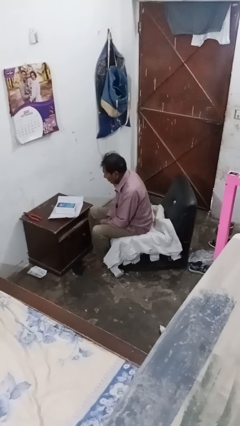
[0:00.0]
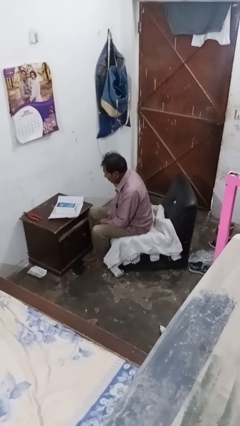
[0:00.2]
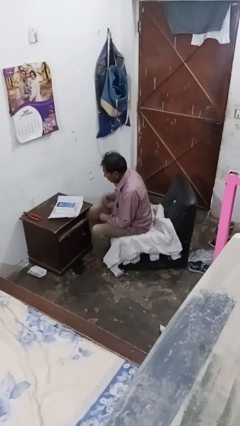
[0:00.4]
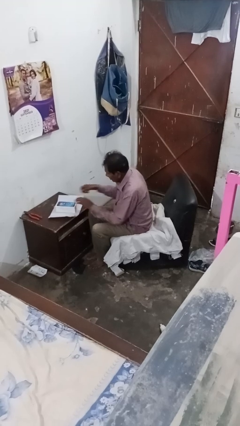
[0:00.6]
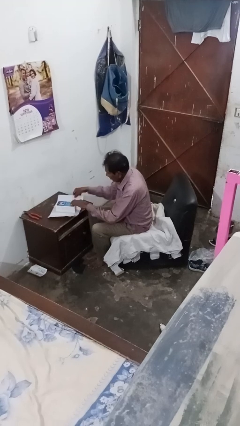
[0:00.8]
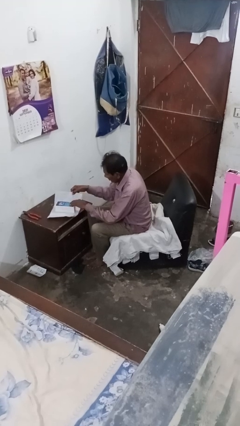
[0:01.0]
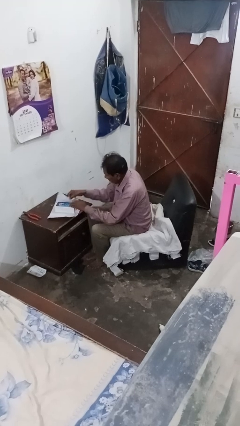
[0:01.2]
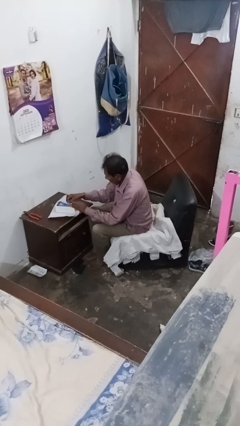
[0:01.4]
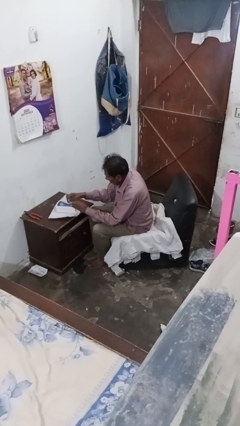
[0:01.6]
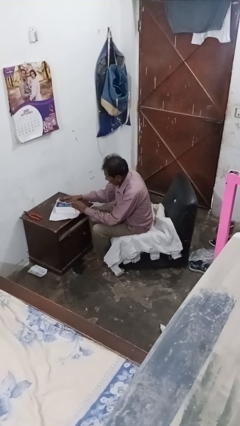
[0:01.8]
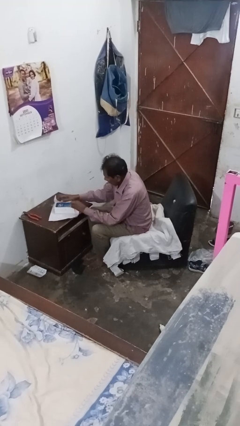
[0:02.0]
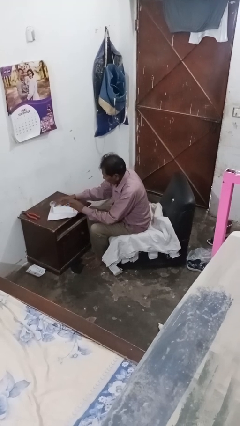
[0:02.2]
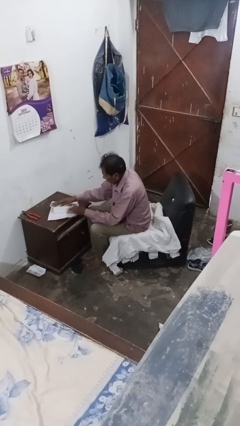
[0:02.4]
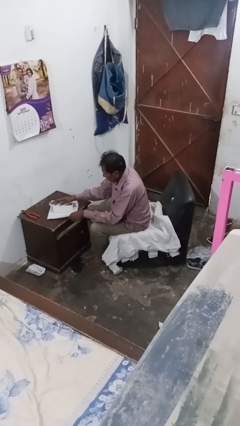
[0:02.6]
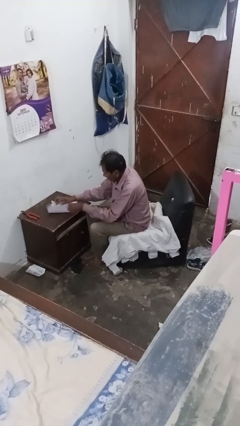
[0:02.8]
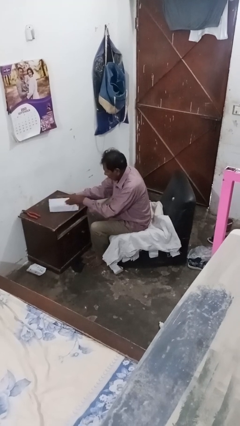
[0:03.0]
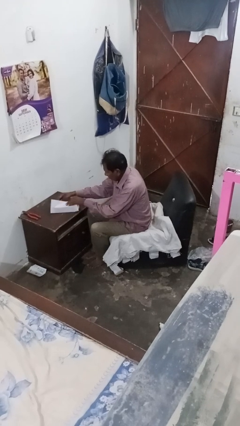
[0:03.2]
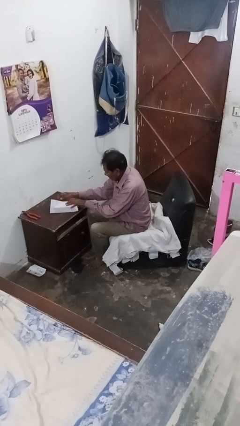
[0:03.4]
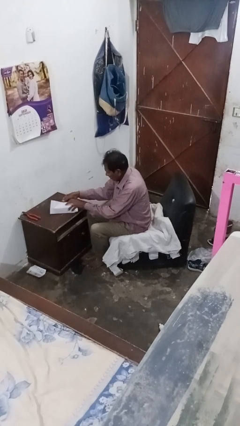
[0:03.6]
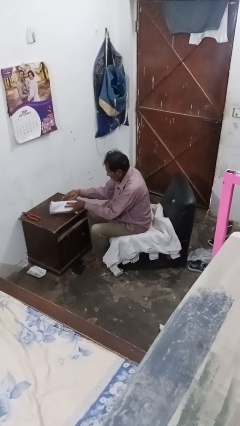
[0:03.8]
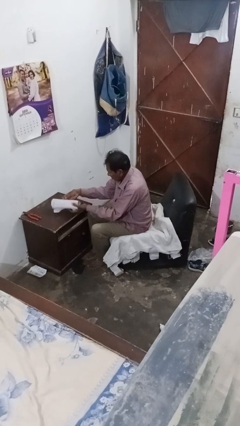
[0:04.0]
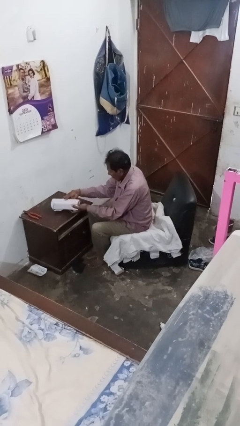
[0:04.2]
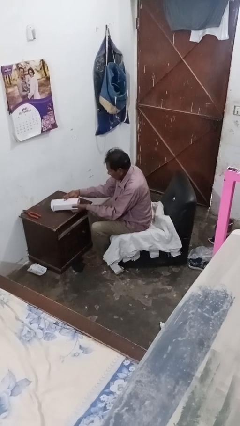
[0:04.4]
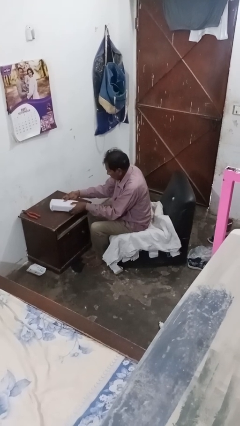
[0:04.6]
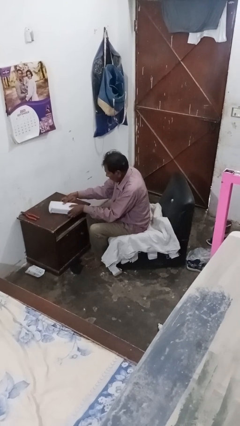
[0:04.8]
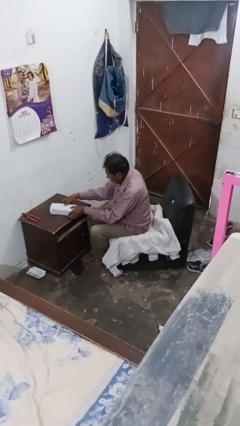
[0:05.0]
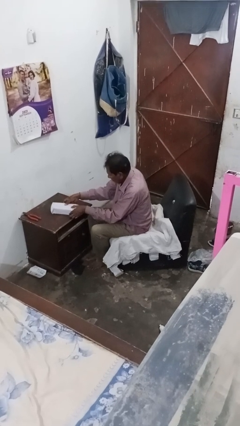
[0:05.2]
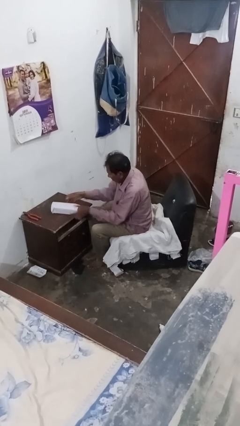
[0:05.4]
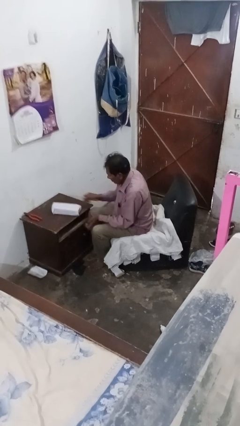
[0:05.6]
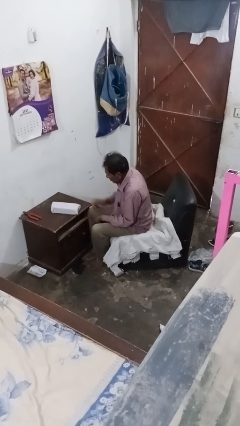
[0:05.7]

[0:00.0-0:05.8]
person wraps box

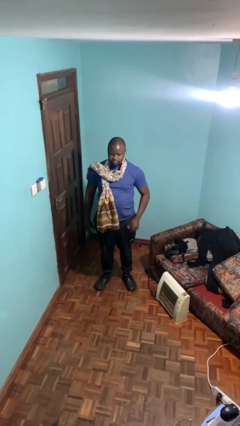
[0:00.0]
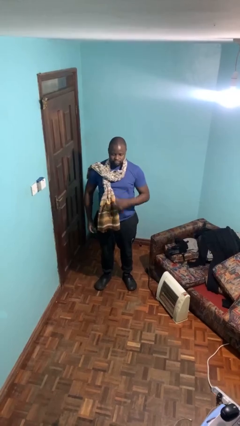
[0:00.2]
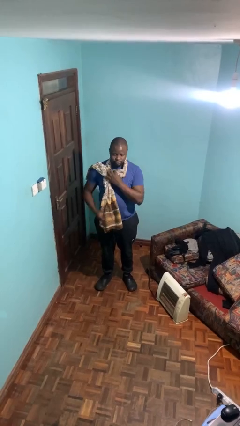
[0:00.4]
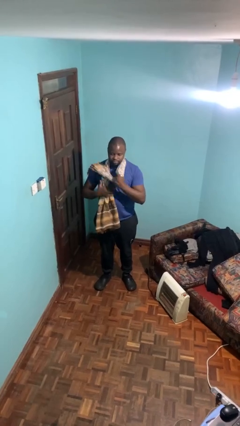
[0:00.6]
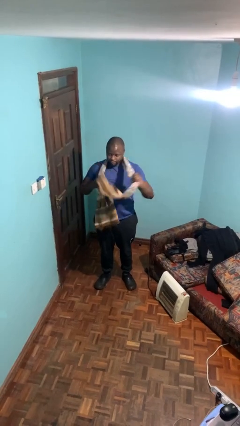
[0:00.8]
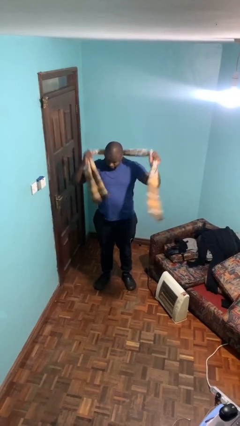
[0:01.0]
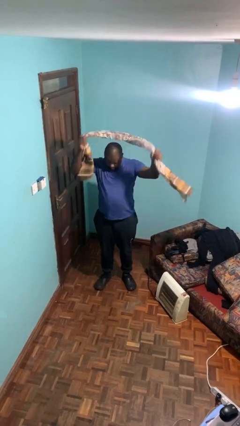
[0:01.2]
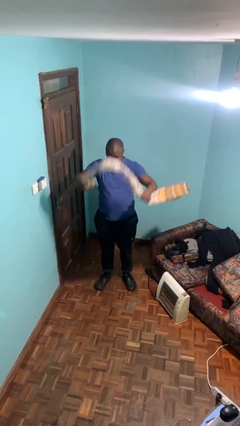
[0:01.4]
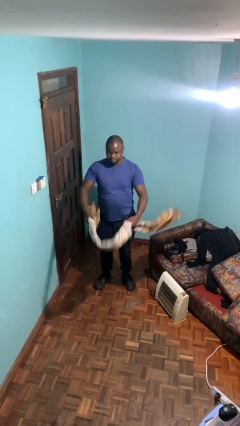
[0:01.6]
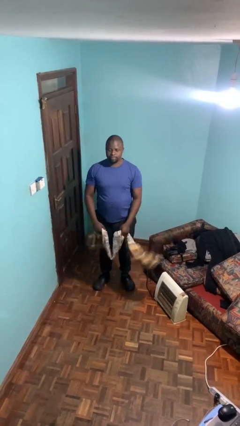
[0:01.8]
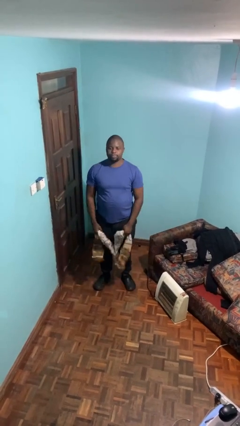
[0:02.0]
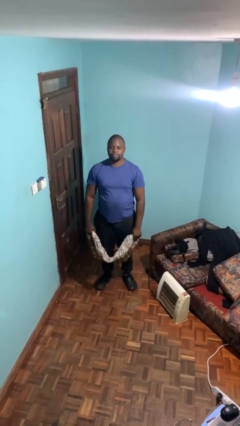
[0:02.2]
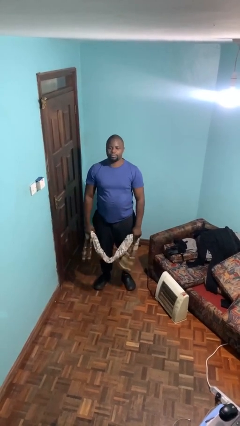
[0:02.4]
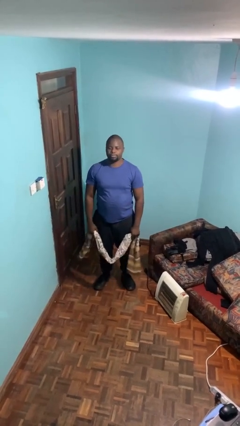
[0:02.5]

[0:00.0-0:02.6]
person takes off scarf

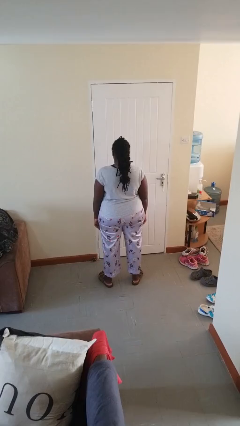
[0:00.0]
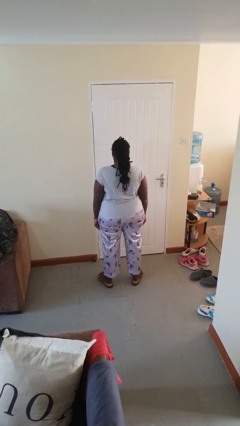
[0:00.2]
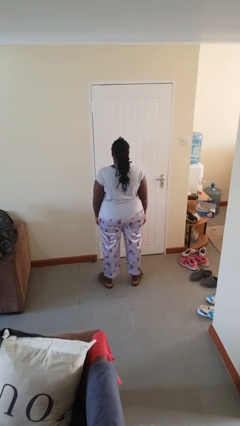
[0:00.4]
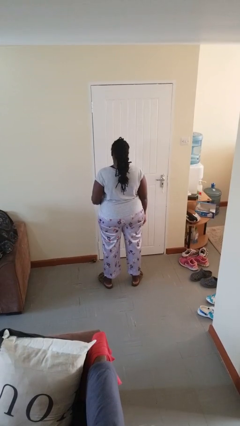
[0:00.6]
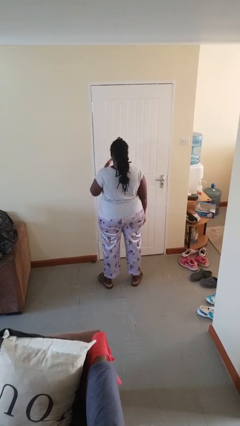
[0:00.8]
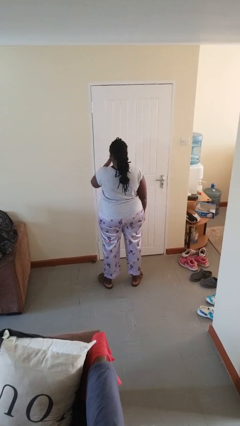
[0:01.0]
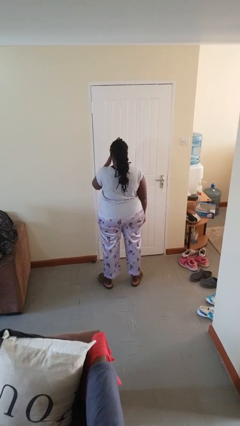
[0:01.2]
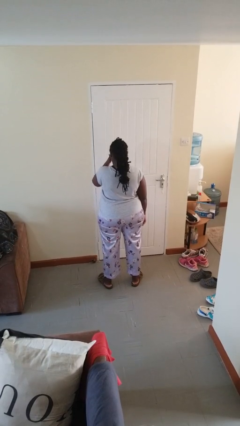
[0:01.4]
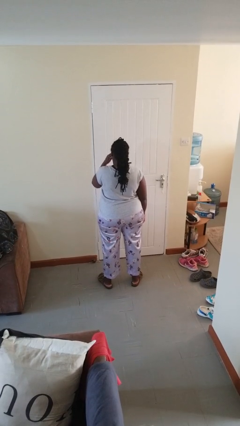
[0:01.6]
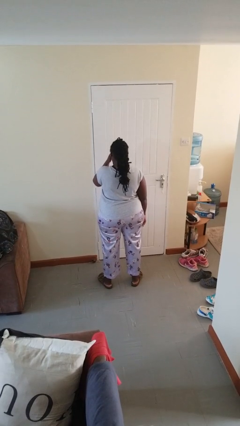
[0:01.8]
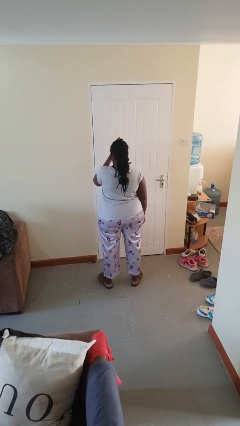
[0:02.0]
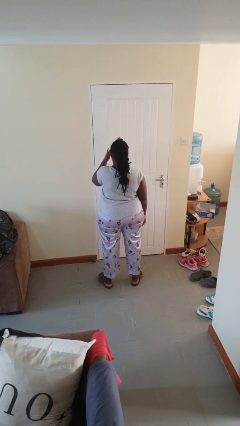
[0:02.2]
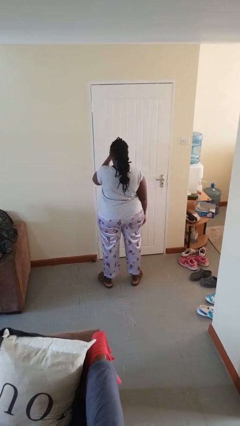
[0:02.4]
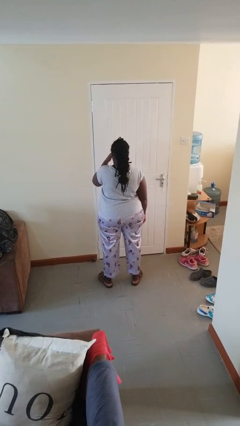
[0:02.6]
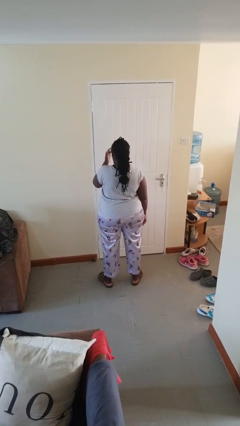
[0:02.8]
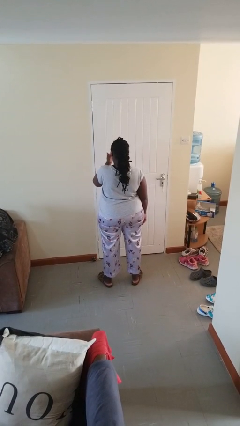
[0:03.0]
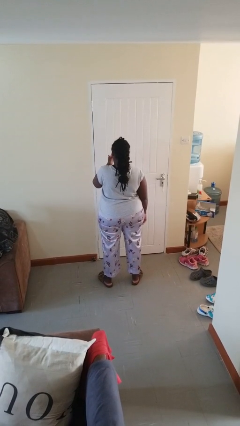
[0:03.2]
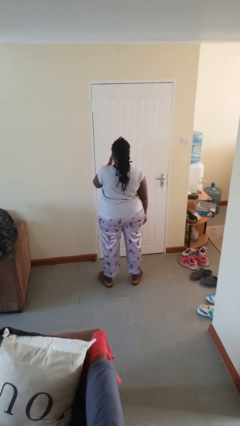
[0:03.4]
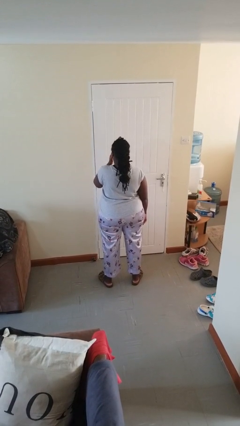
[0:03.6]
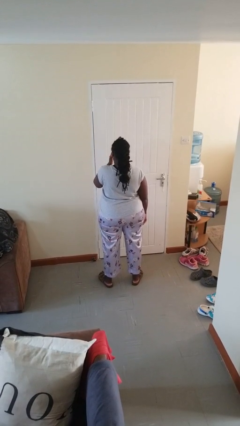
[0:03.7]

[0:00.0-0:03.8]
person scratches face

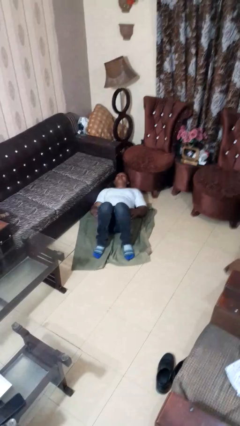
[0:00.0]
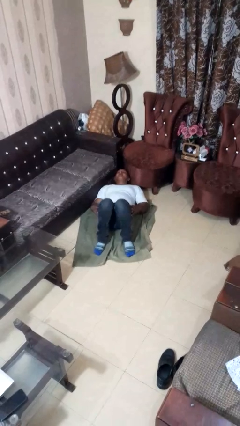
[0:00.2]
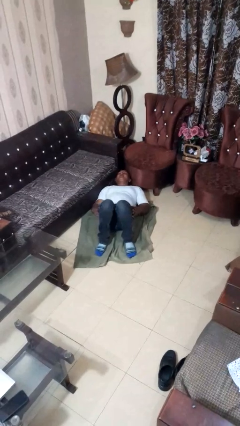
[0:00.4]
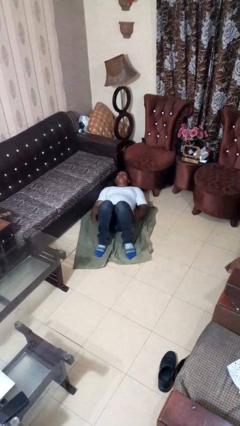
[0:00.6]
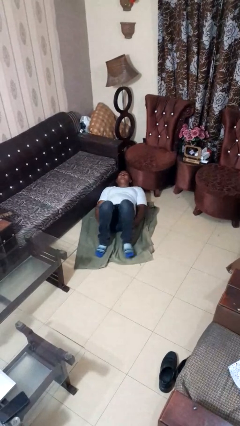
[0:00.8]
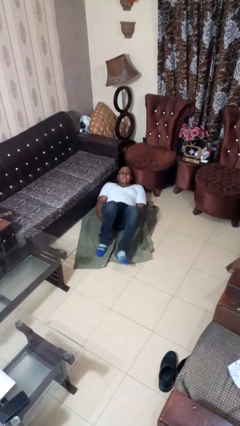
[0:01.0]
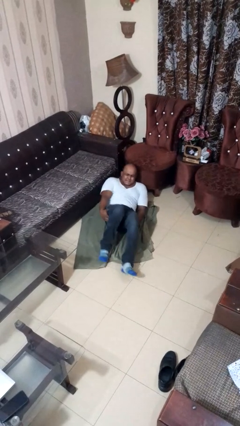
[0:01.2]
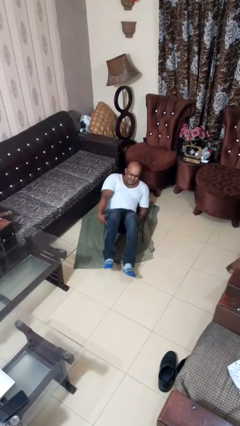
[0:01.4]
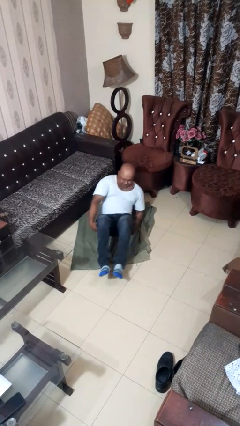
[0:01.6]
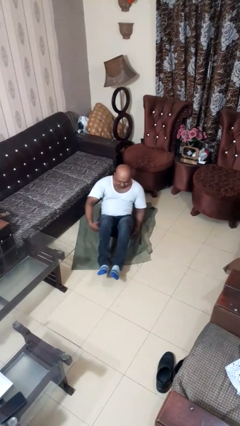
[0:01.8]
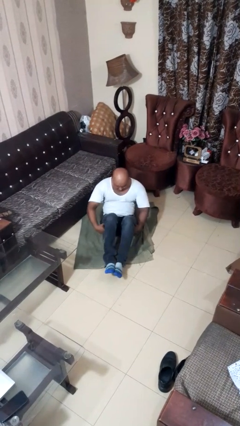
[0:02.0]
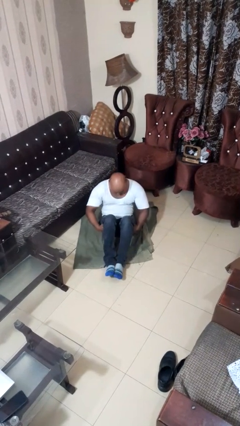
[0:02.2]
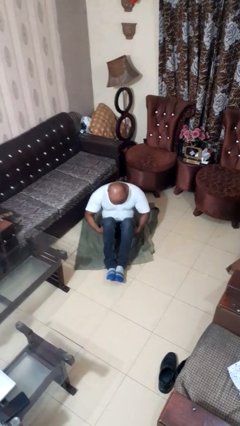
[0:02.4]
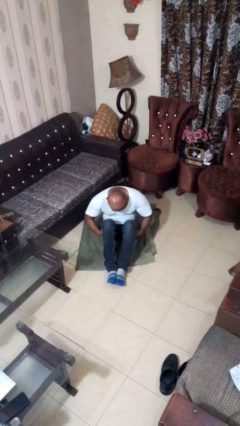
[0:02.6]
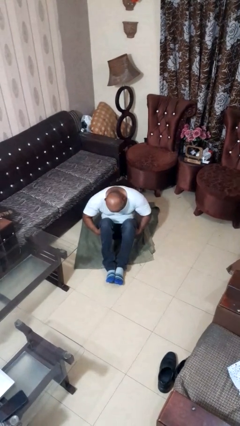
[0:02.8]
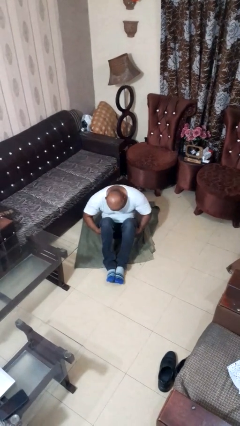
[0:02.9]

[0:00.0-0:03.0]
person exercises with situp

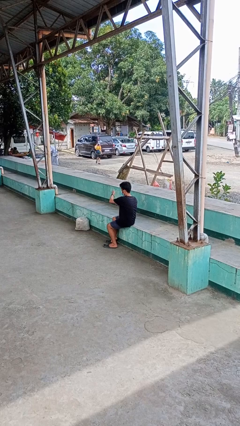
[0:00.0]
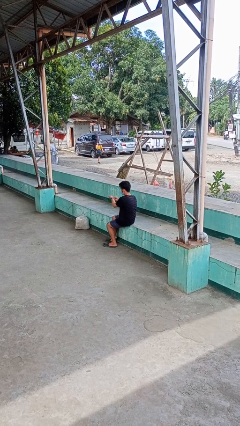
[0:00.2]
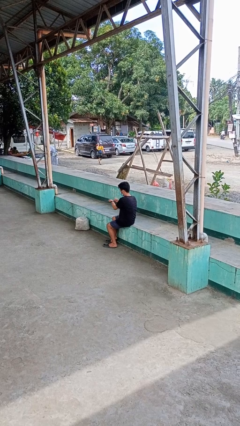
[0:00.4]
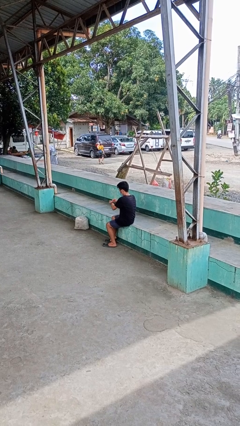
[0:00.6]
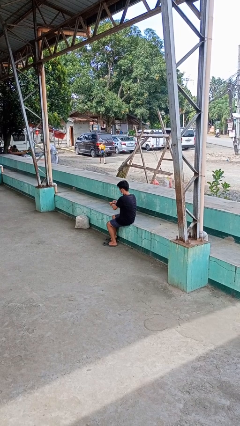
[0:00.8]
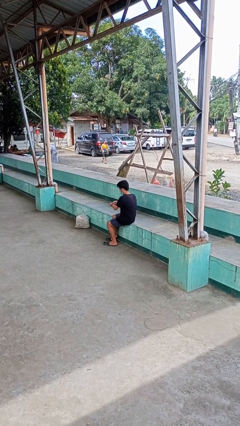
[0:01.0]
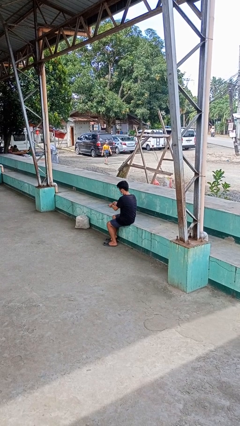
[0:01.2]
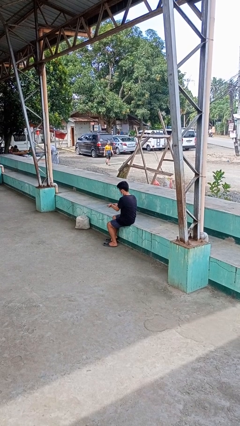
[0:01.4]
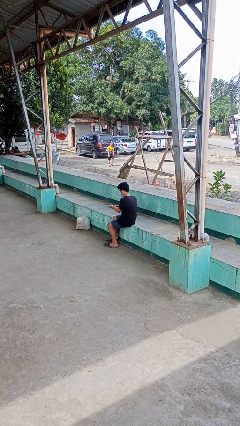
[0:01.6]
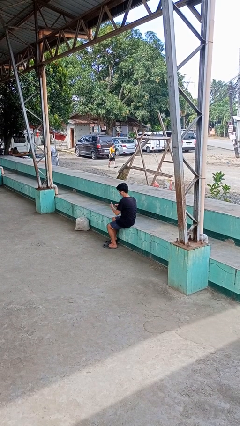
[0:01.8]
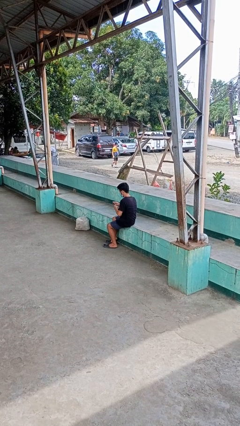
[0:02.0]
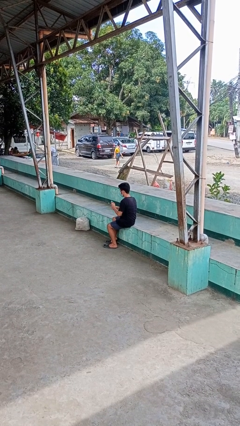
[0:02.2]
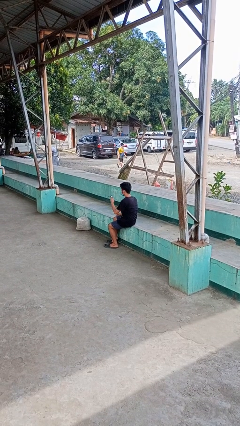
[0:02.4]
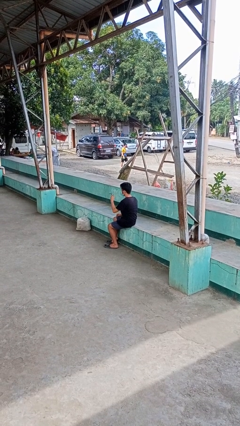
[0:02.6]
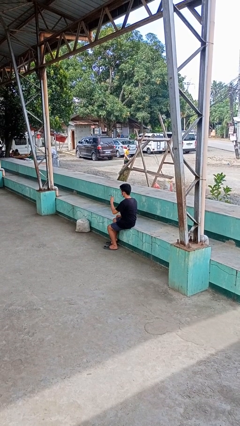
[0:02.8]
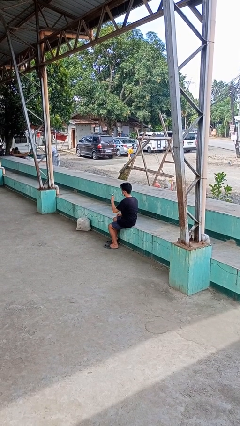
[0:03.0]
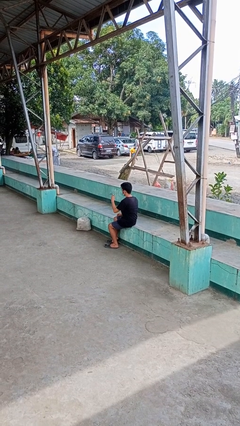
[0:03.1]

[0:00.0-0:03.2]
person takes off wristwatch
